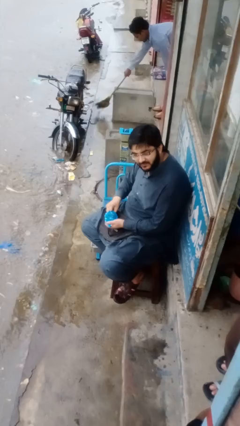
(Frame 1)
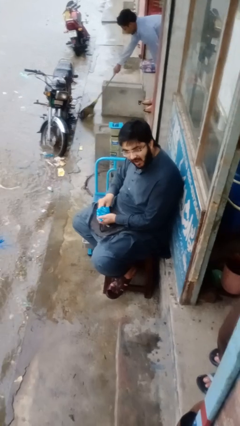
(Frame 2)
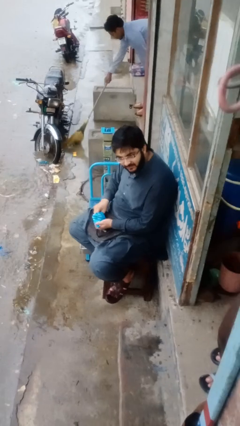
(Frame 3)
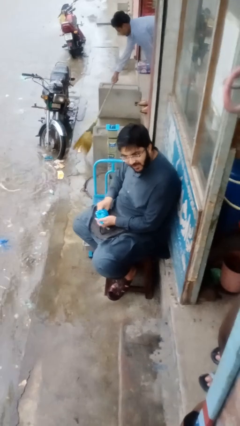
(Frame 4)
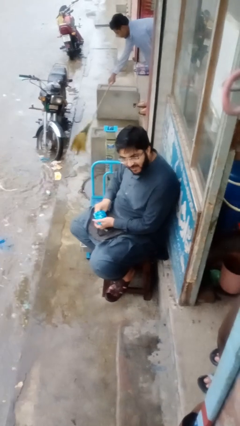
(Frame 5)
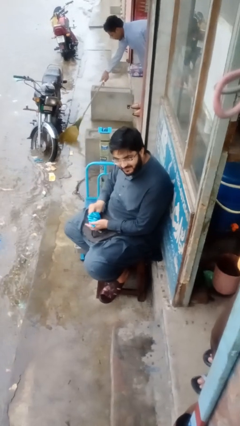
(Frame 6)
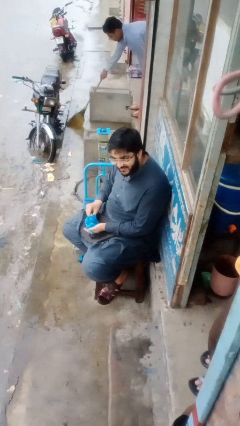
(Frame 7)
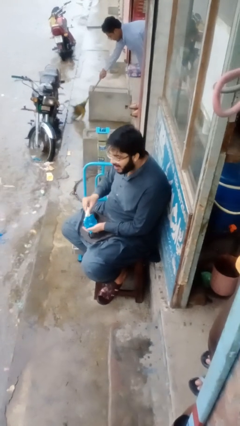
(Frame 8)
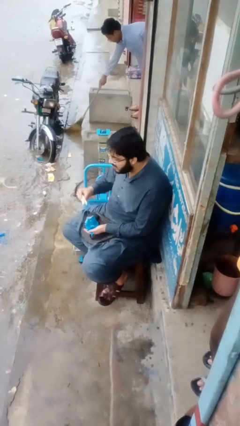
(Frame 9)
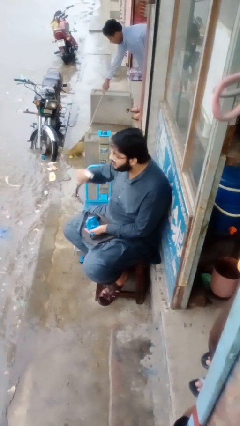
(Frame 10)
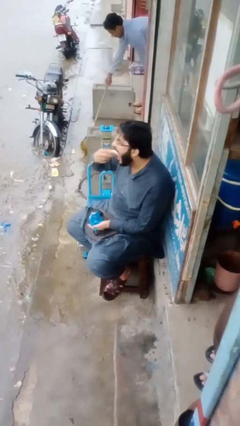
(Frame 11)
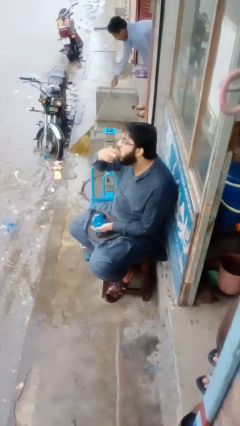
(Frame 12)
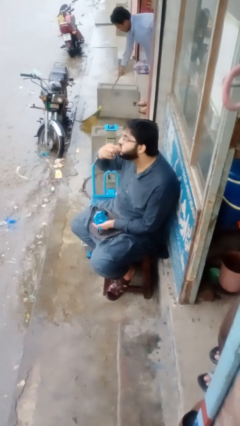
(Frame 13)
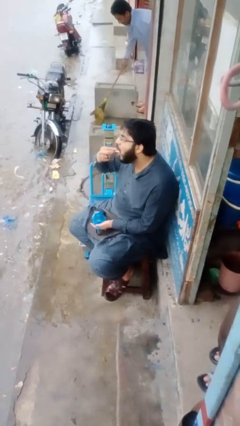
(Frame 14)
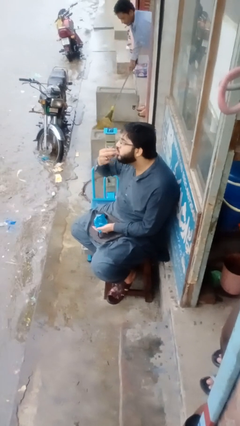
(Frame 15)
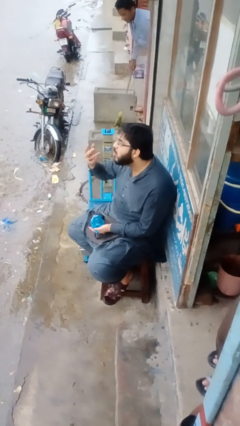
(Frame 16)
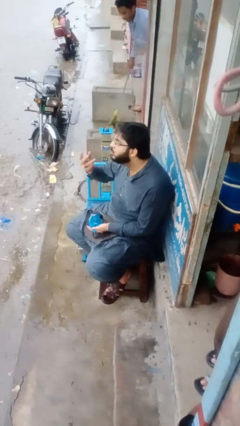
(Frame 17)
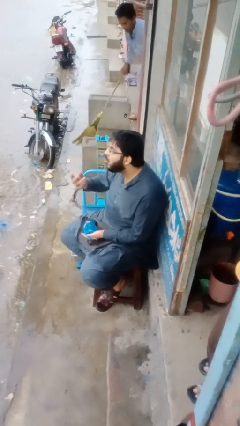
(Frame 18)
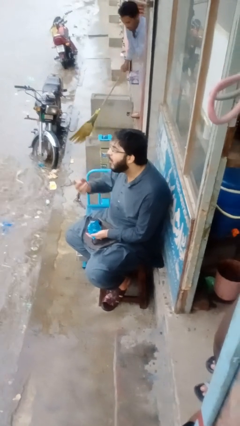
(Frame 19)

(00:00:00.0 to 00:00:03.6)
person eats snack from bag

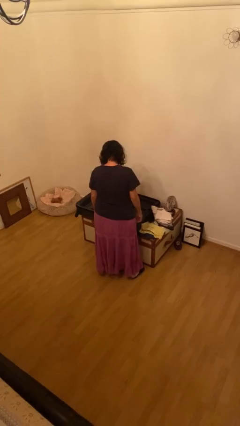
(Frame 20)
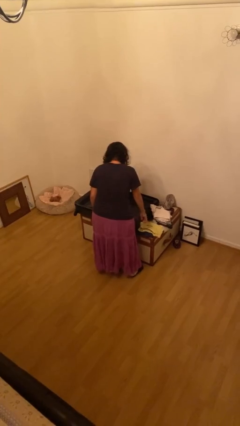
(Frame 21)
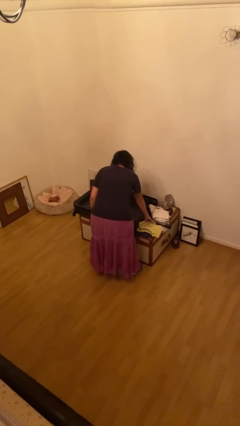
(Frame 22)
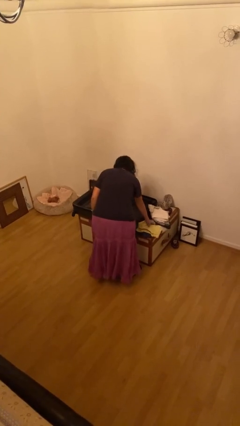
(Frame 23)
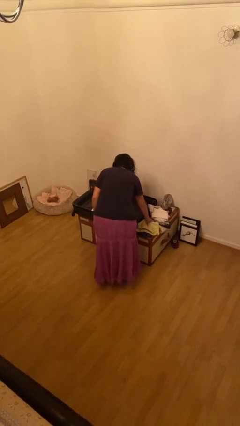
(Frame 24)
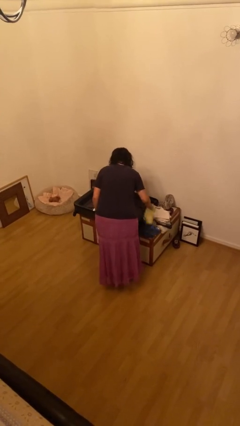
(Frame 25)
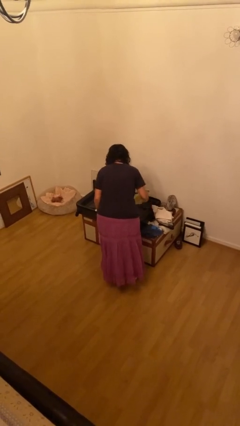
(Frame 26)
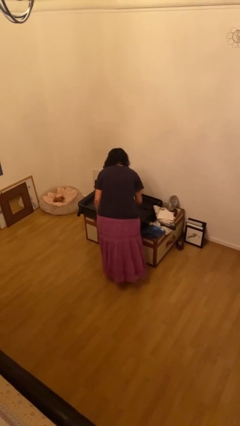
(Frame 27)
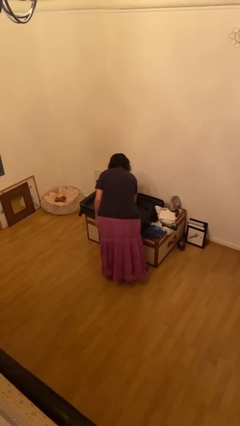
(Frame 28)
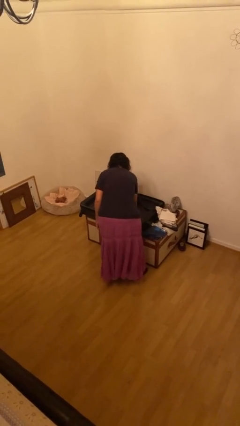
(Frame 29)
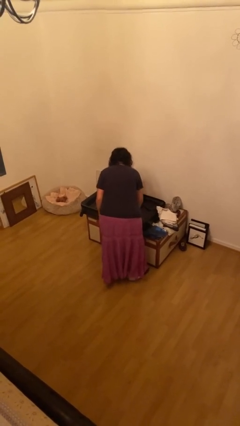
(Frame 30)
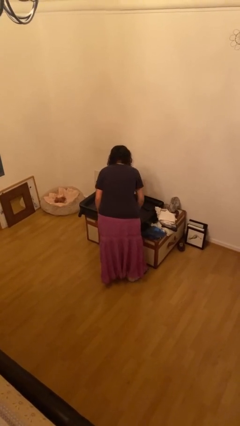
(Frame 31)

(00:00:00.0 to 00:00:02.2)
person unloads clothes from suitcase

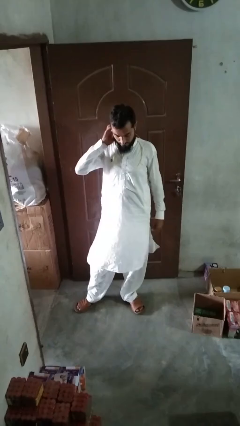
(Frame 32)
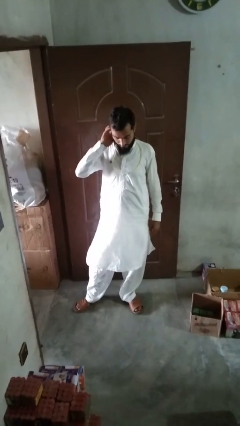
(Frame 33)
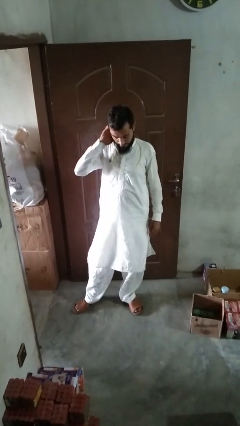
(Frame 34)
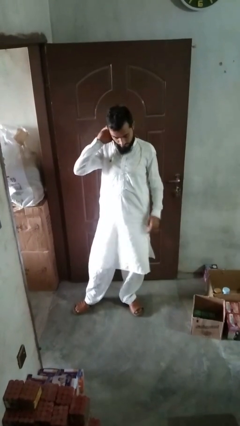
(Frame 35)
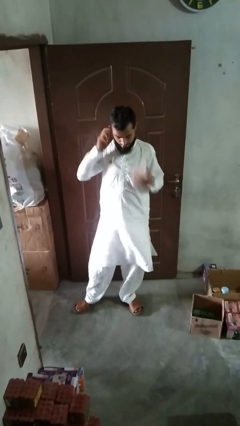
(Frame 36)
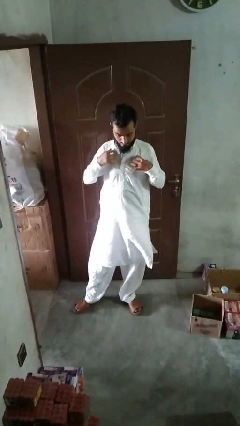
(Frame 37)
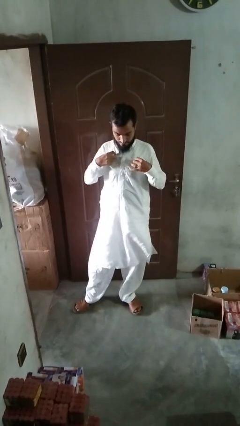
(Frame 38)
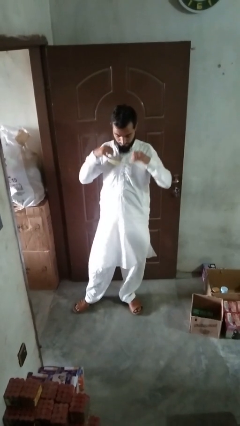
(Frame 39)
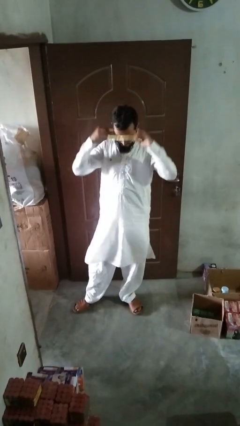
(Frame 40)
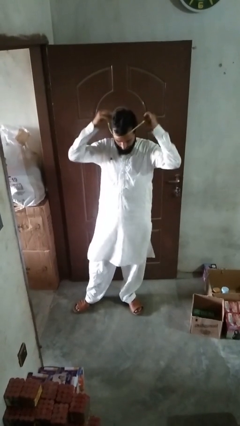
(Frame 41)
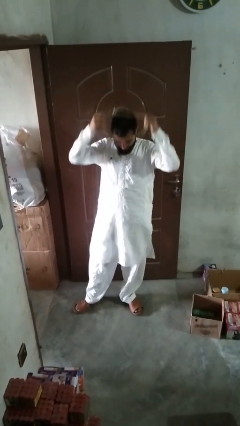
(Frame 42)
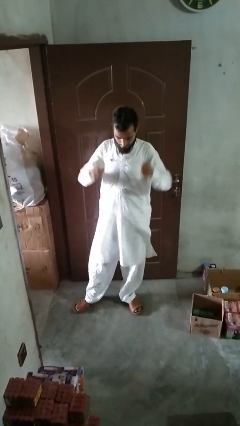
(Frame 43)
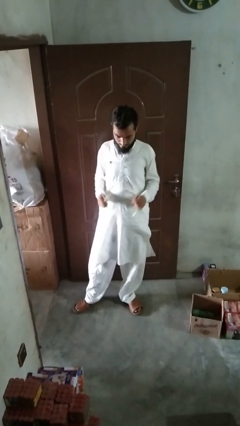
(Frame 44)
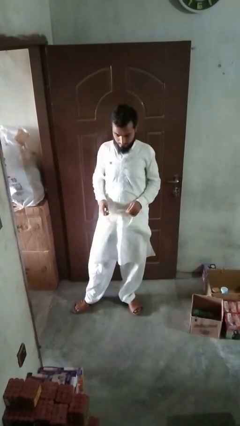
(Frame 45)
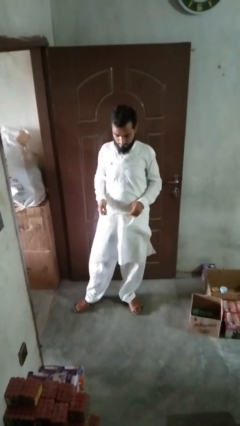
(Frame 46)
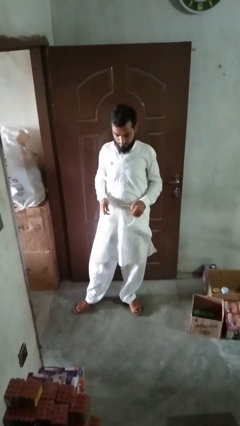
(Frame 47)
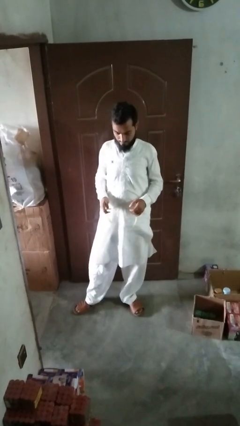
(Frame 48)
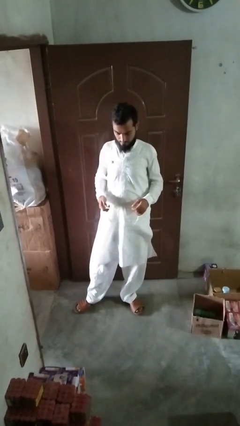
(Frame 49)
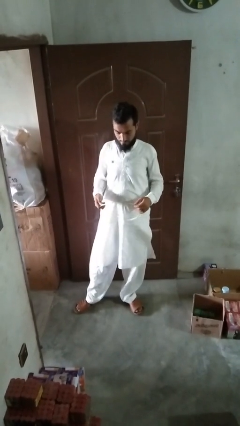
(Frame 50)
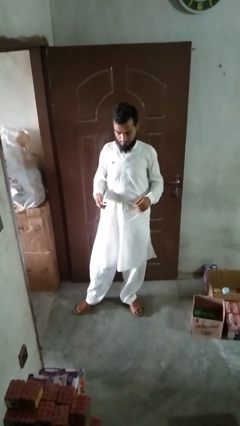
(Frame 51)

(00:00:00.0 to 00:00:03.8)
person takes off necklace

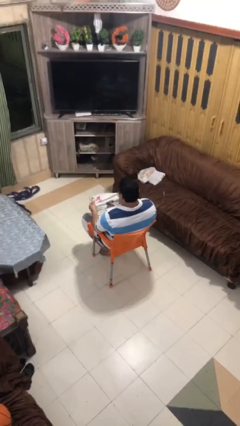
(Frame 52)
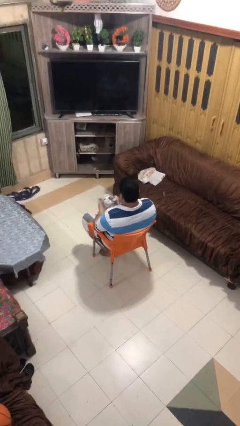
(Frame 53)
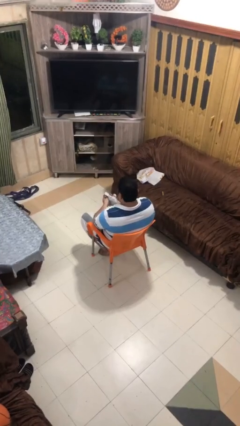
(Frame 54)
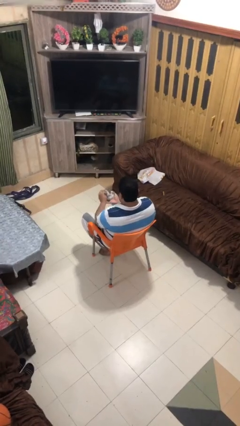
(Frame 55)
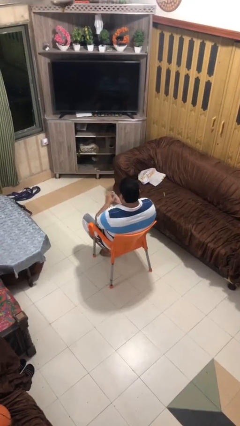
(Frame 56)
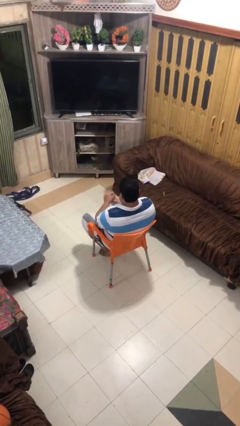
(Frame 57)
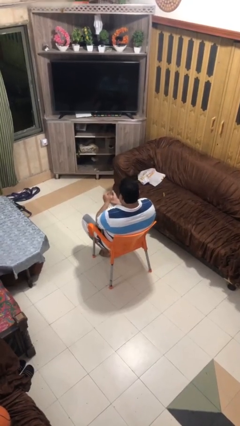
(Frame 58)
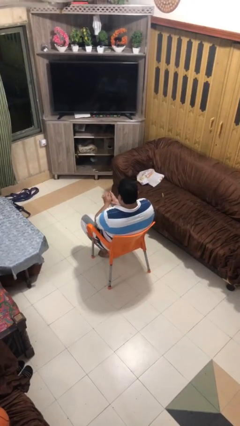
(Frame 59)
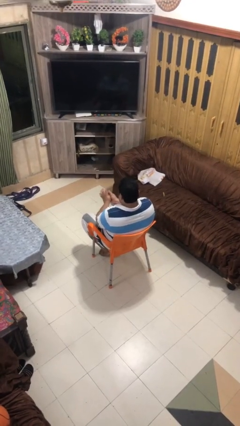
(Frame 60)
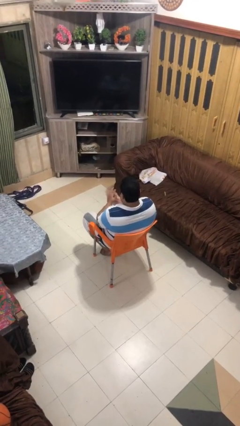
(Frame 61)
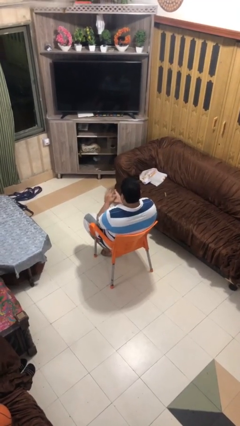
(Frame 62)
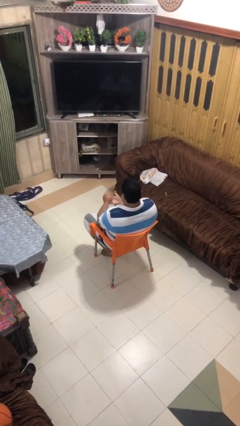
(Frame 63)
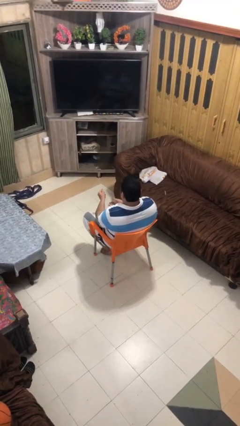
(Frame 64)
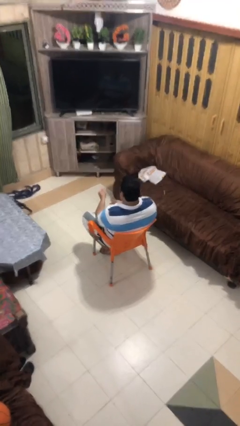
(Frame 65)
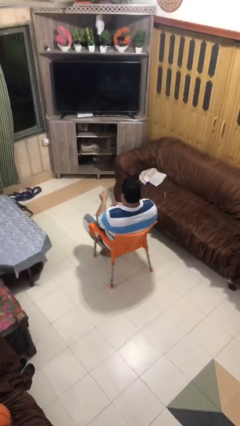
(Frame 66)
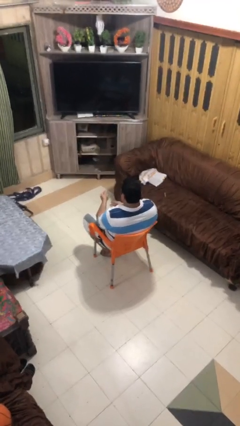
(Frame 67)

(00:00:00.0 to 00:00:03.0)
person crumples paper

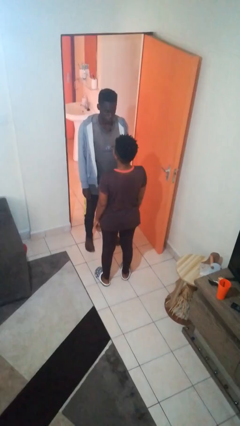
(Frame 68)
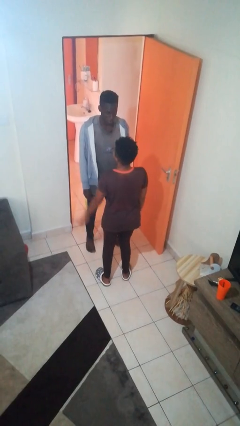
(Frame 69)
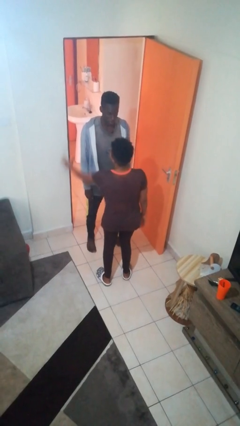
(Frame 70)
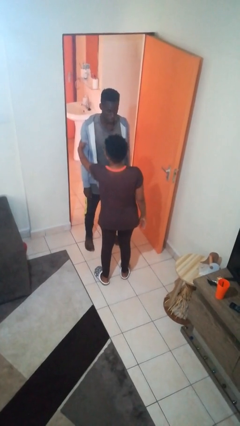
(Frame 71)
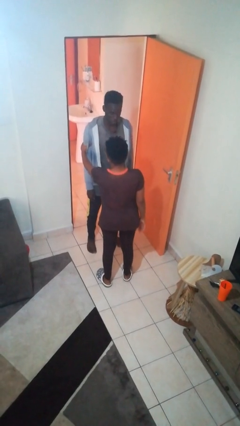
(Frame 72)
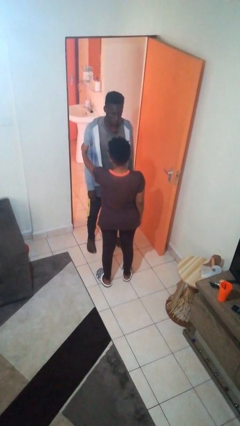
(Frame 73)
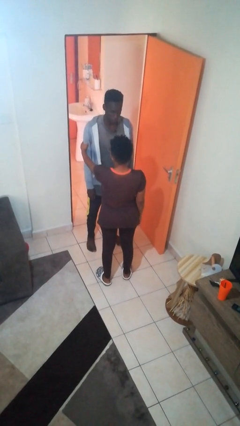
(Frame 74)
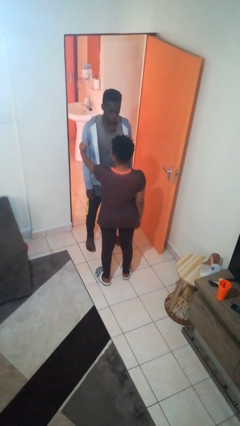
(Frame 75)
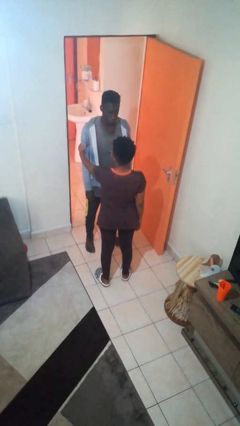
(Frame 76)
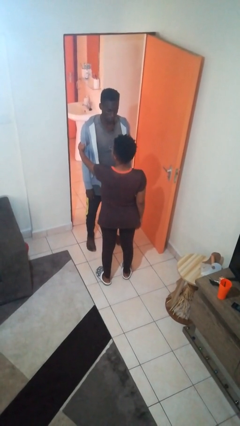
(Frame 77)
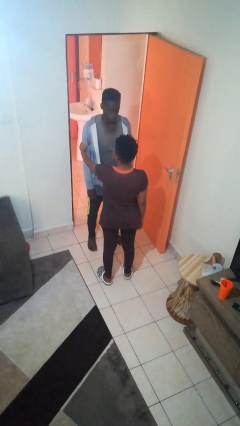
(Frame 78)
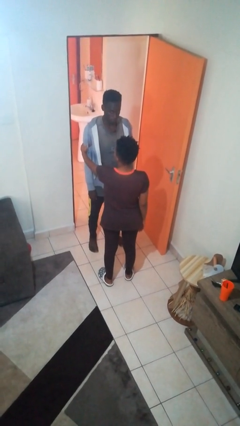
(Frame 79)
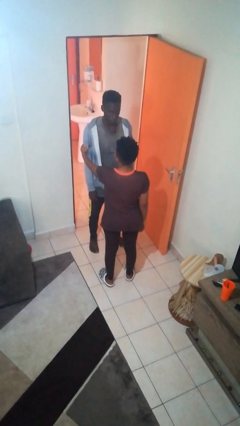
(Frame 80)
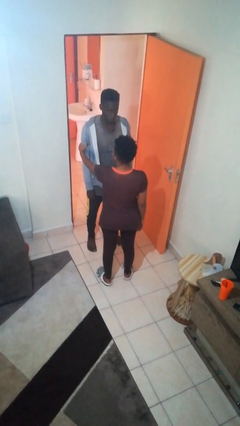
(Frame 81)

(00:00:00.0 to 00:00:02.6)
person grabs person by bicep

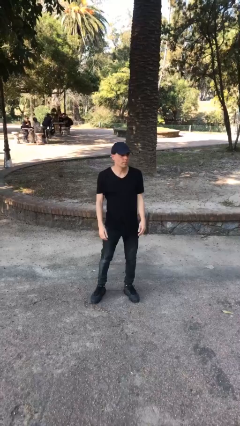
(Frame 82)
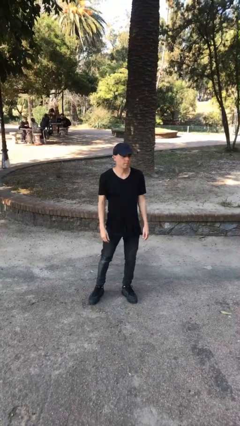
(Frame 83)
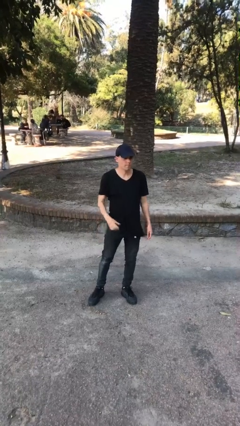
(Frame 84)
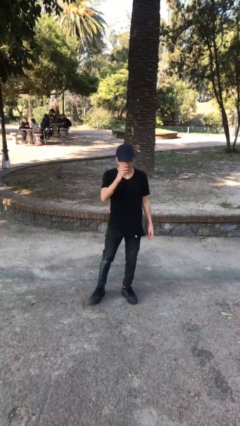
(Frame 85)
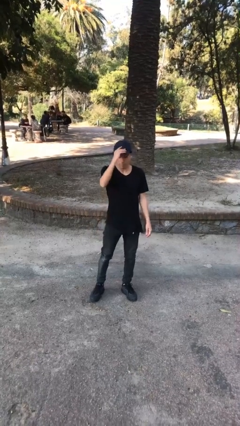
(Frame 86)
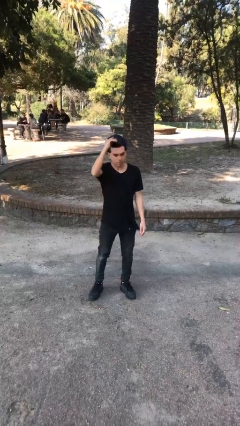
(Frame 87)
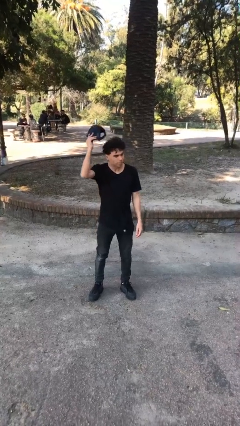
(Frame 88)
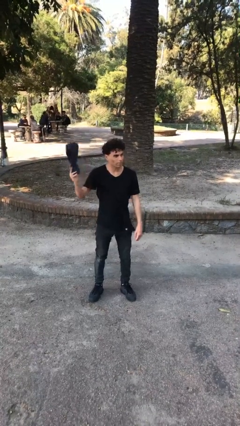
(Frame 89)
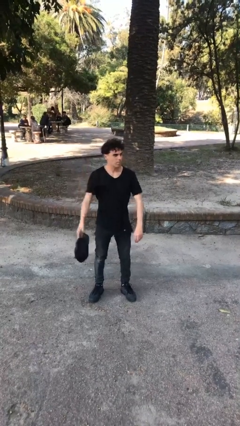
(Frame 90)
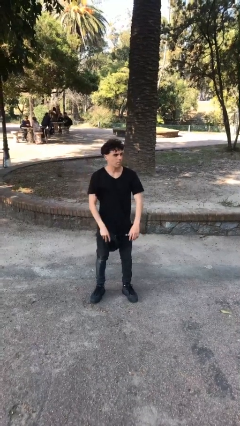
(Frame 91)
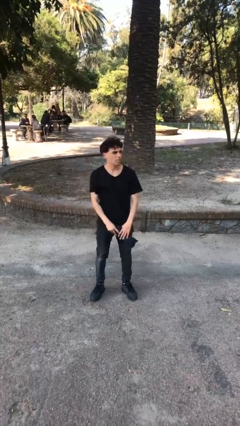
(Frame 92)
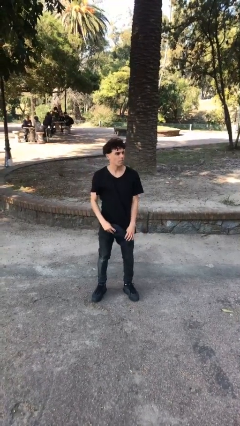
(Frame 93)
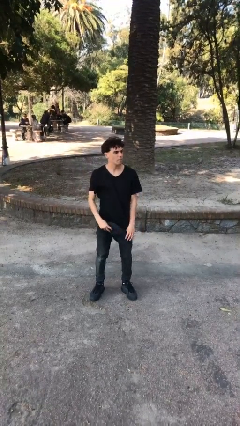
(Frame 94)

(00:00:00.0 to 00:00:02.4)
person takes off hat
